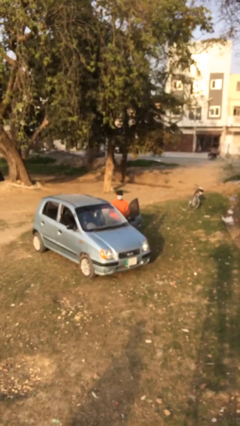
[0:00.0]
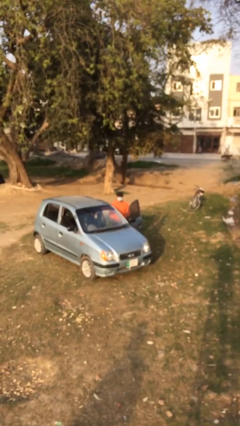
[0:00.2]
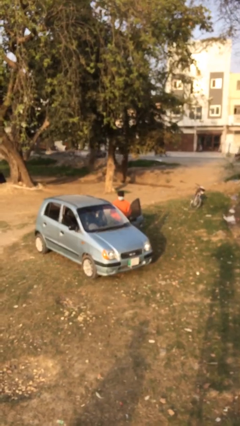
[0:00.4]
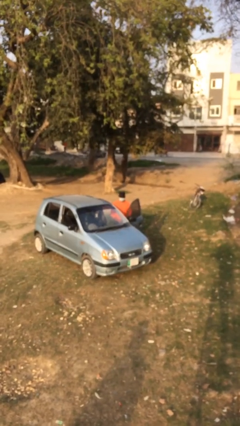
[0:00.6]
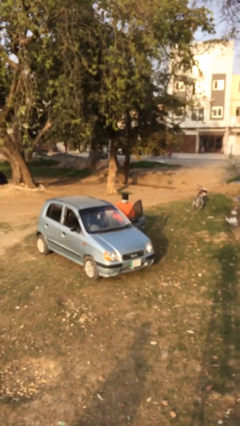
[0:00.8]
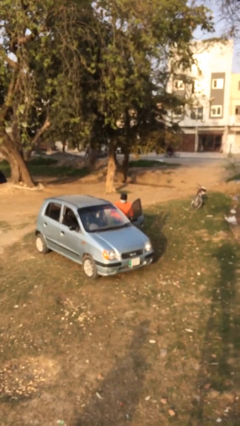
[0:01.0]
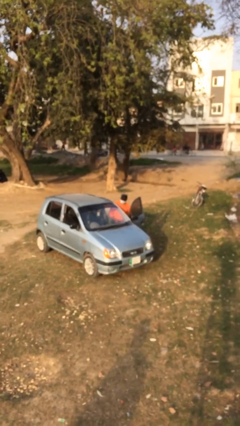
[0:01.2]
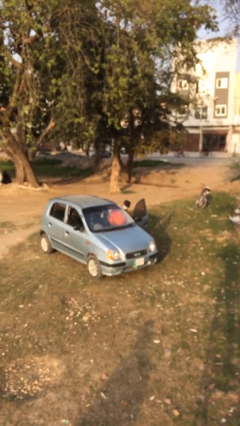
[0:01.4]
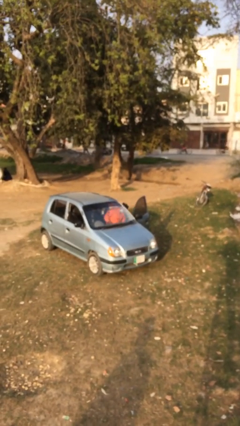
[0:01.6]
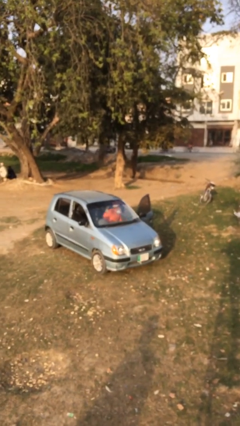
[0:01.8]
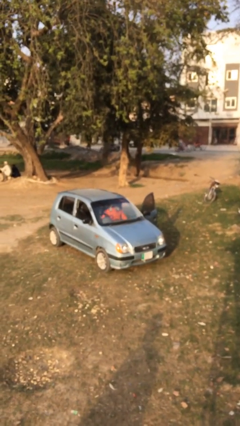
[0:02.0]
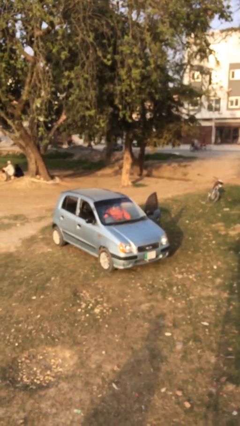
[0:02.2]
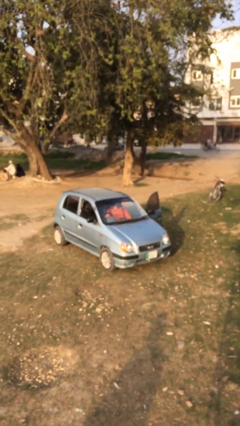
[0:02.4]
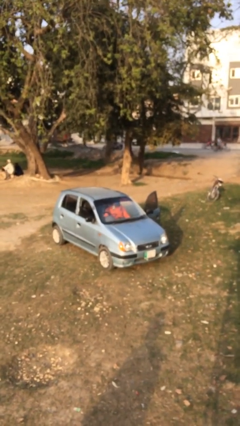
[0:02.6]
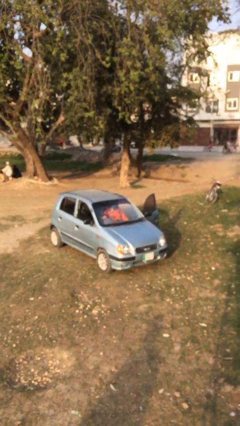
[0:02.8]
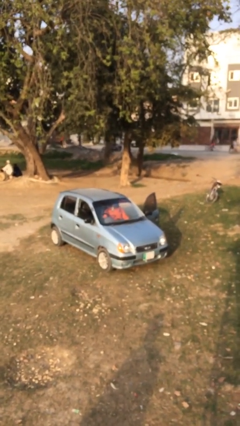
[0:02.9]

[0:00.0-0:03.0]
person enters car

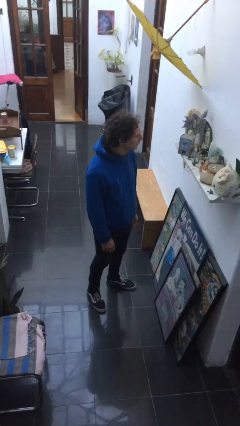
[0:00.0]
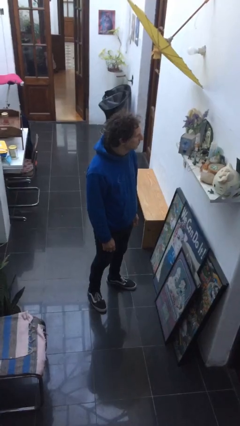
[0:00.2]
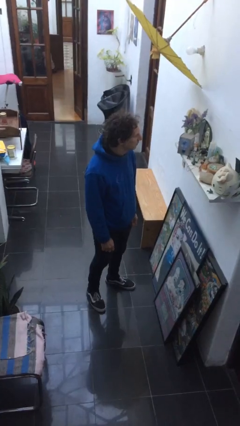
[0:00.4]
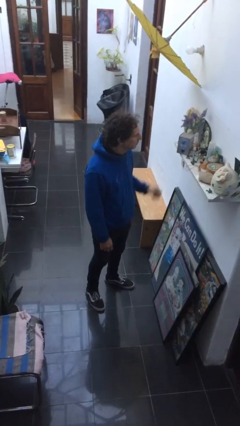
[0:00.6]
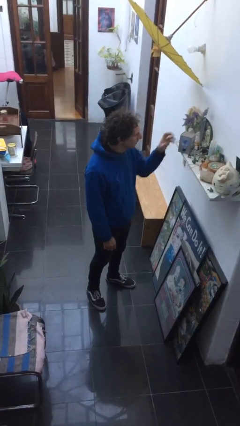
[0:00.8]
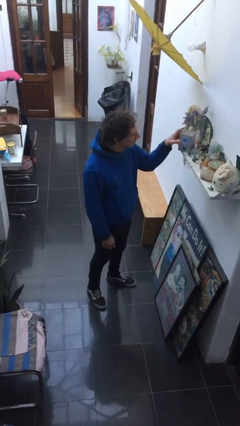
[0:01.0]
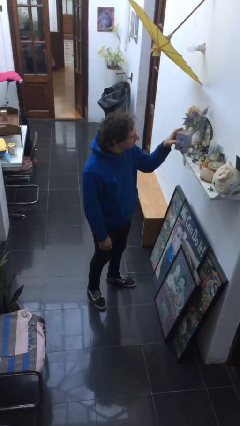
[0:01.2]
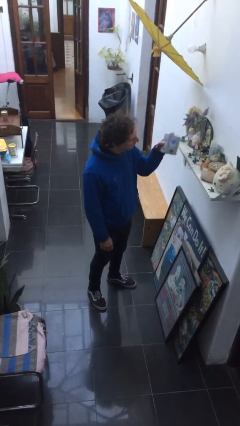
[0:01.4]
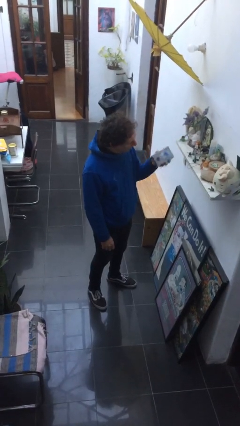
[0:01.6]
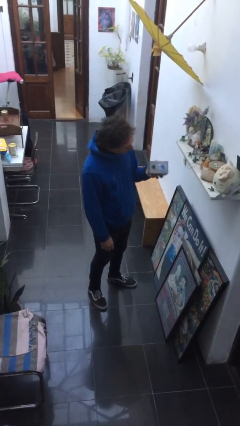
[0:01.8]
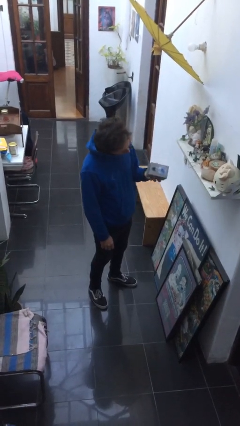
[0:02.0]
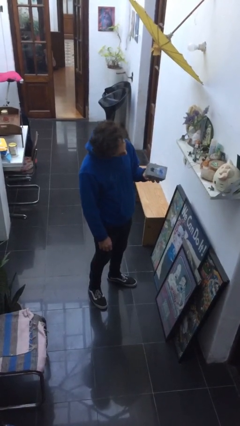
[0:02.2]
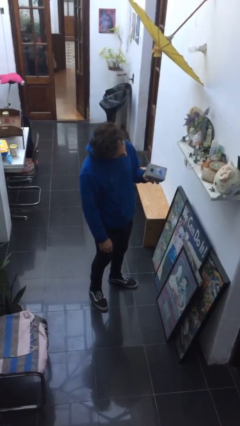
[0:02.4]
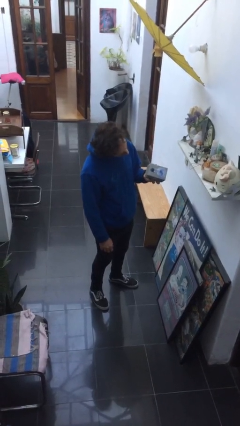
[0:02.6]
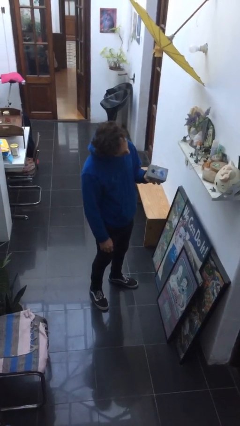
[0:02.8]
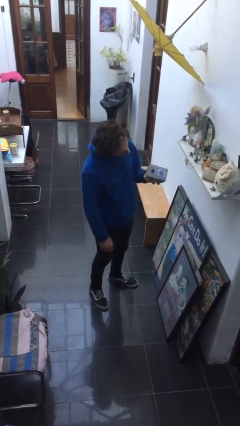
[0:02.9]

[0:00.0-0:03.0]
person picks up object from countertop

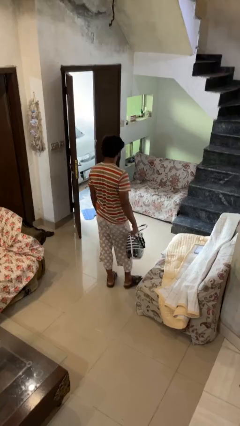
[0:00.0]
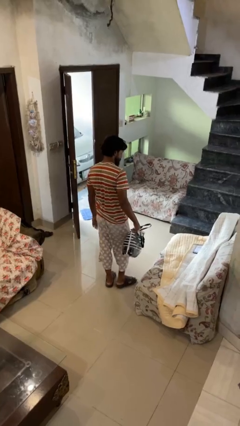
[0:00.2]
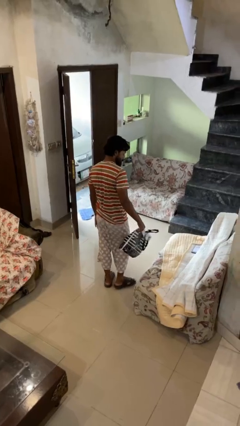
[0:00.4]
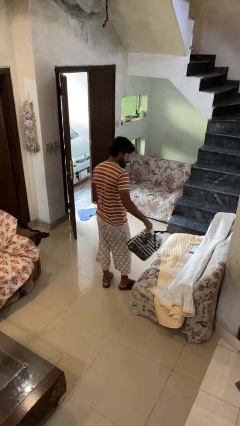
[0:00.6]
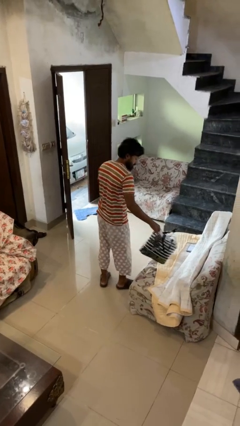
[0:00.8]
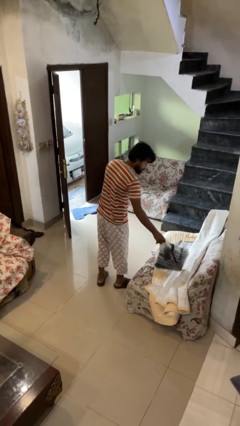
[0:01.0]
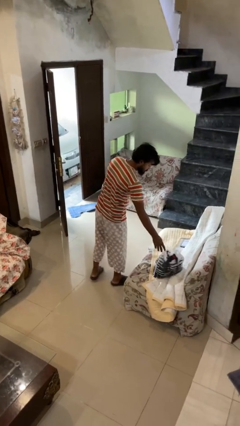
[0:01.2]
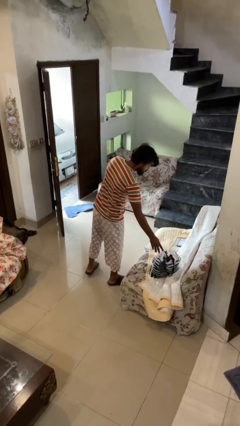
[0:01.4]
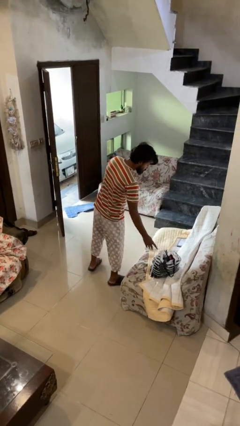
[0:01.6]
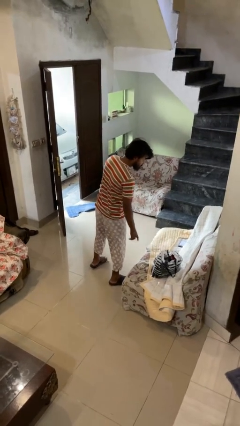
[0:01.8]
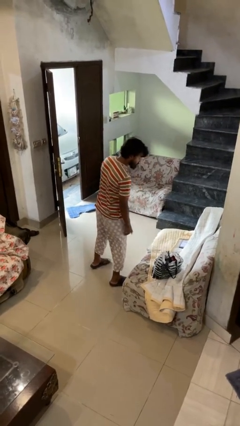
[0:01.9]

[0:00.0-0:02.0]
person puts down object on couch

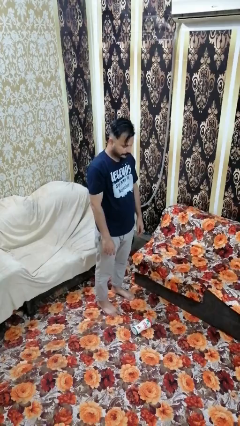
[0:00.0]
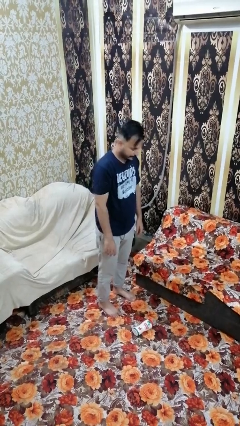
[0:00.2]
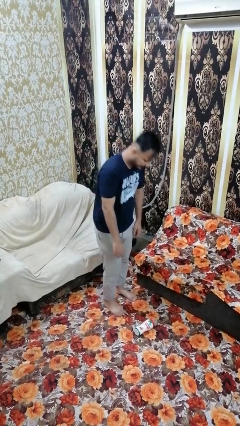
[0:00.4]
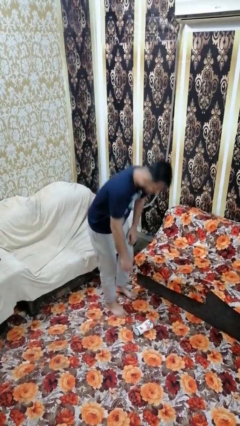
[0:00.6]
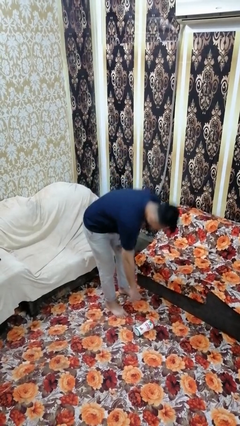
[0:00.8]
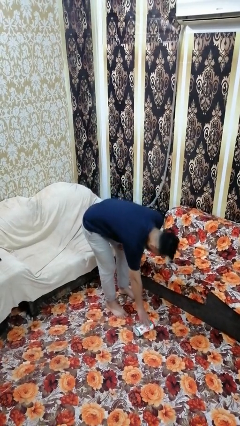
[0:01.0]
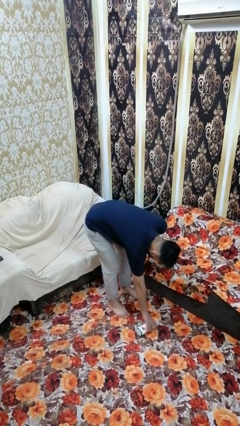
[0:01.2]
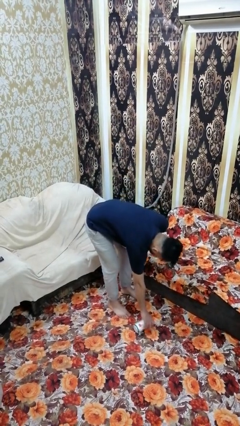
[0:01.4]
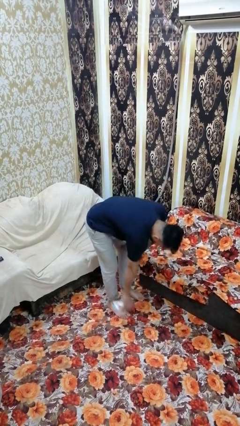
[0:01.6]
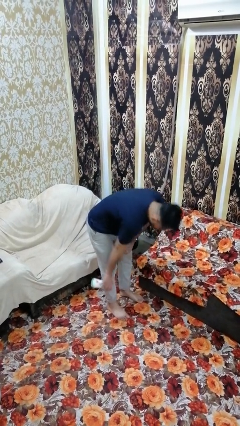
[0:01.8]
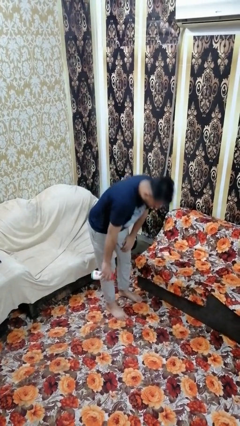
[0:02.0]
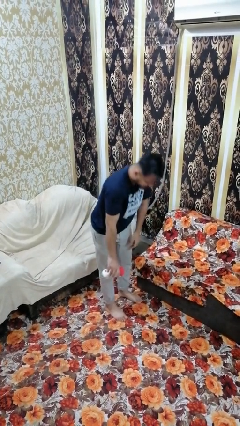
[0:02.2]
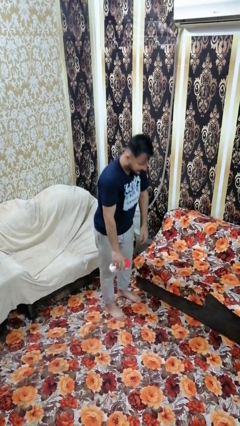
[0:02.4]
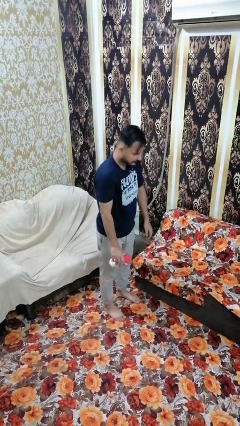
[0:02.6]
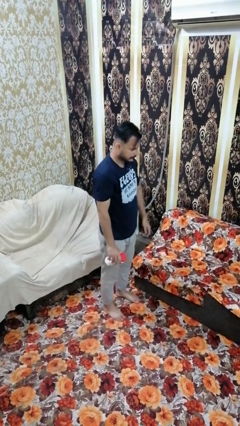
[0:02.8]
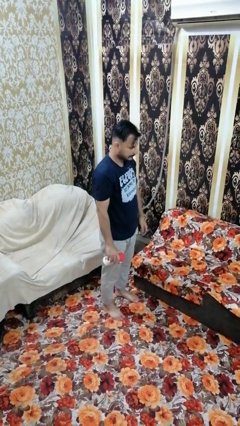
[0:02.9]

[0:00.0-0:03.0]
person picks up object from floor

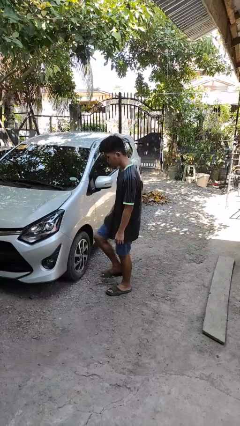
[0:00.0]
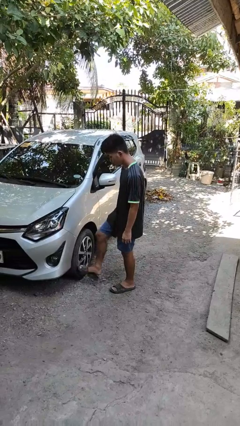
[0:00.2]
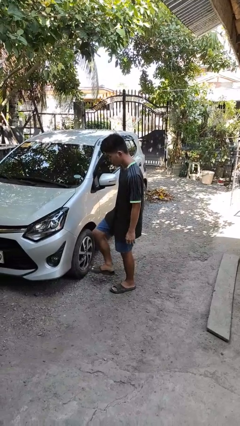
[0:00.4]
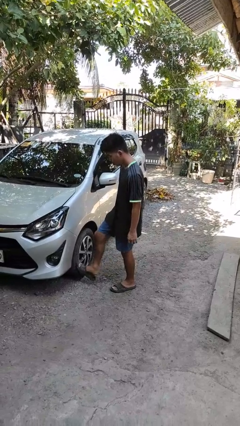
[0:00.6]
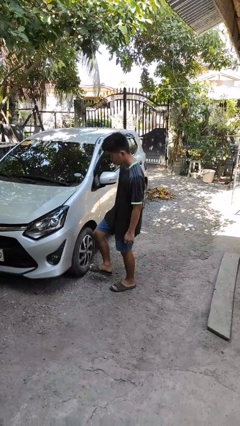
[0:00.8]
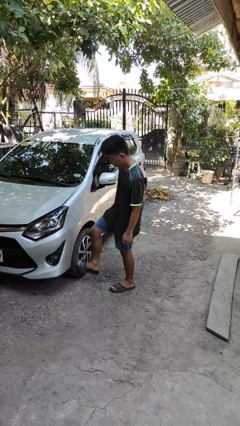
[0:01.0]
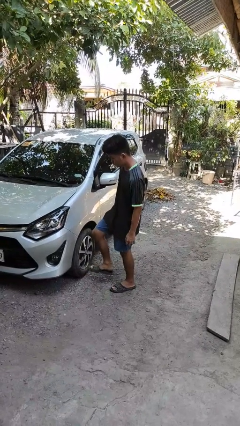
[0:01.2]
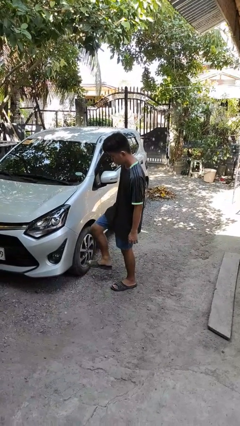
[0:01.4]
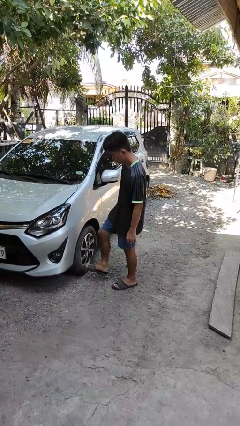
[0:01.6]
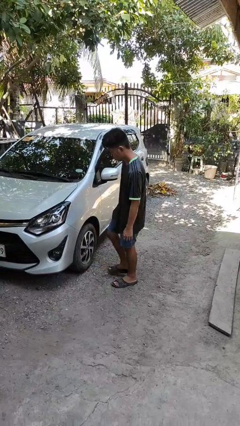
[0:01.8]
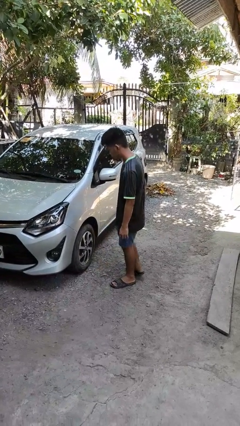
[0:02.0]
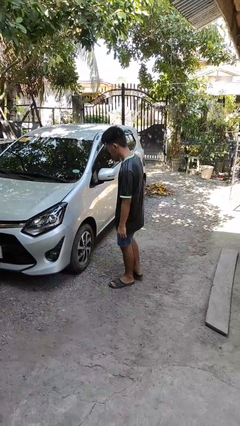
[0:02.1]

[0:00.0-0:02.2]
person kicks car tires

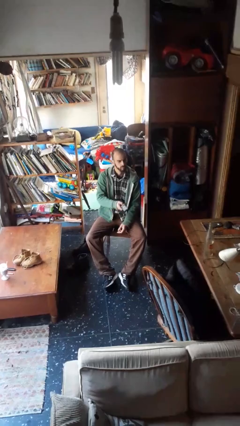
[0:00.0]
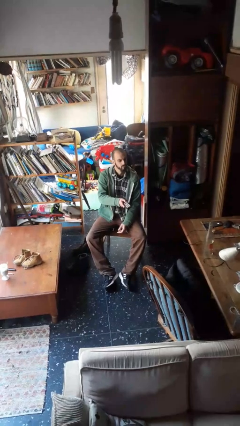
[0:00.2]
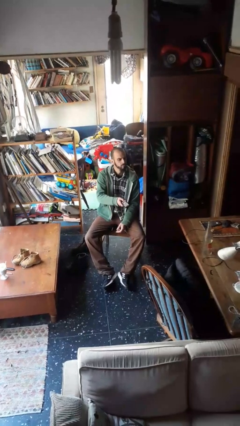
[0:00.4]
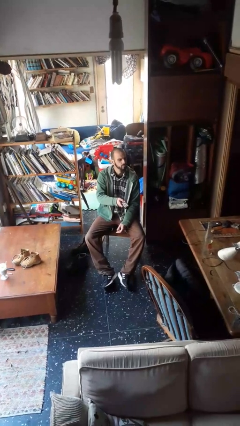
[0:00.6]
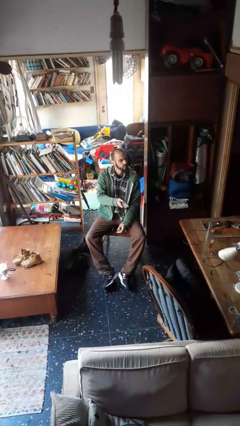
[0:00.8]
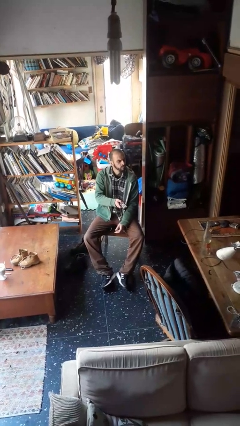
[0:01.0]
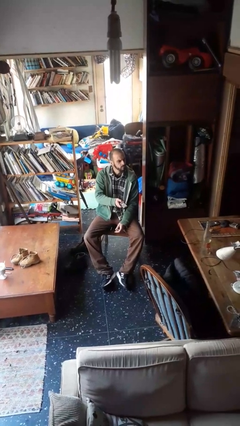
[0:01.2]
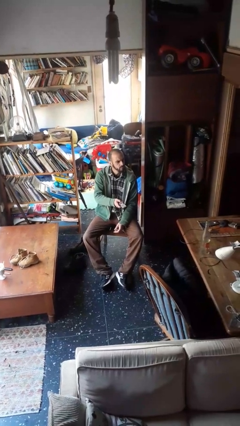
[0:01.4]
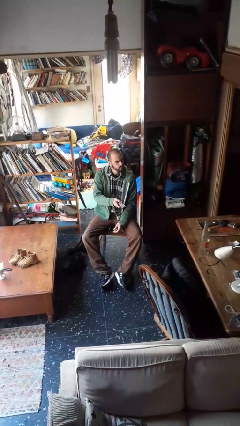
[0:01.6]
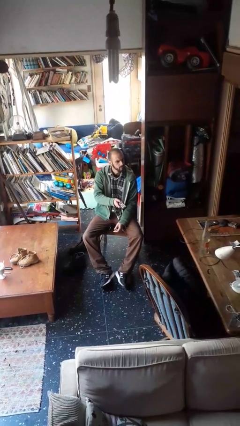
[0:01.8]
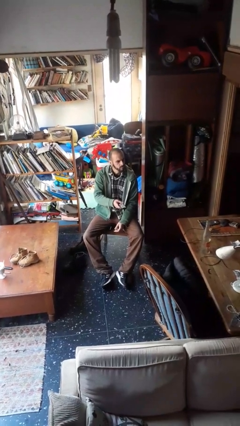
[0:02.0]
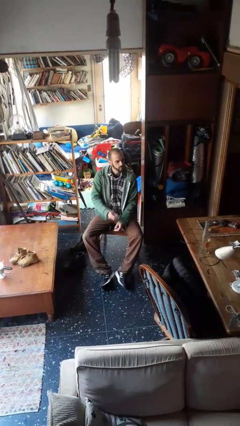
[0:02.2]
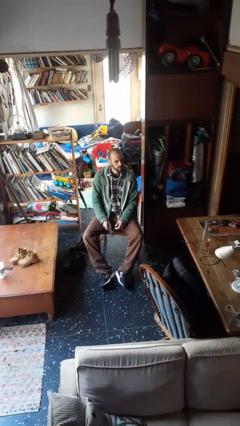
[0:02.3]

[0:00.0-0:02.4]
person uses television remote

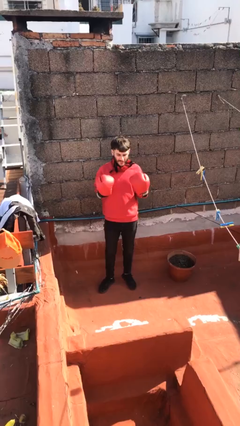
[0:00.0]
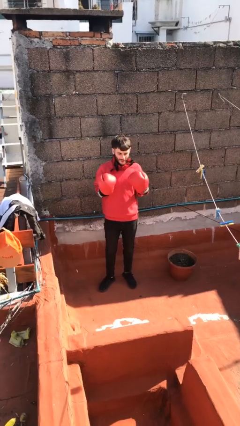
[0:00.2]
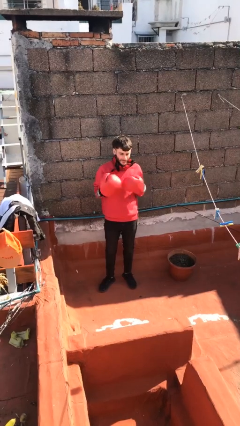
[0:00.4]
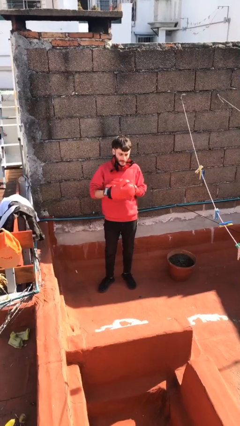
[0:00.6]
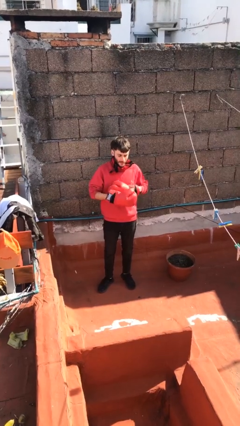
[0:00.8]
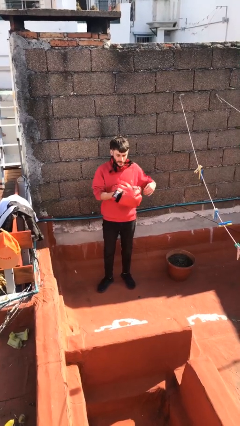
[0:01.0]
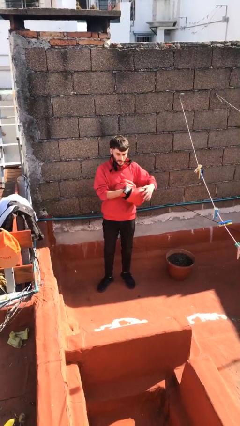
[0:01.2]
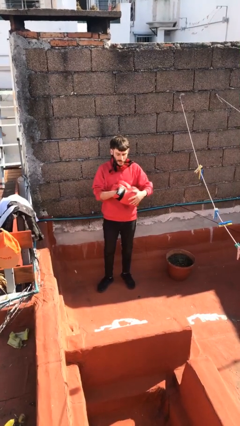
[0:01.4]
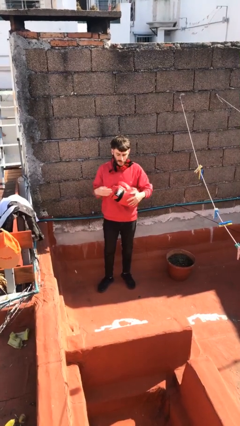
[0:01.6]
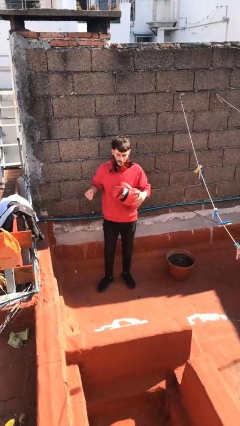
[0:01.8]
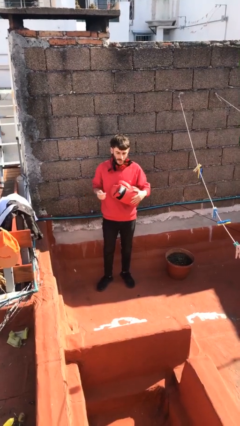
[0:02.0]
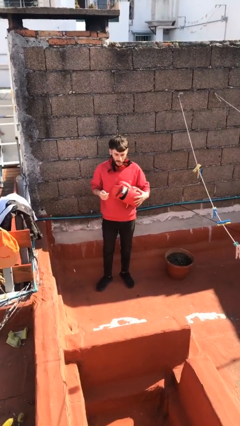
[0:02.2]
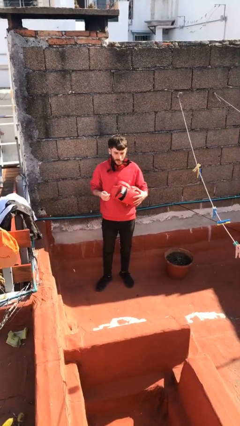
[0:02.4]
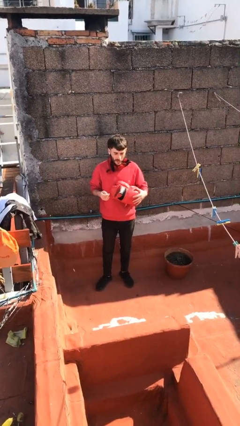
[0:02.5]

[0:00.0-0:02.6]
person takes off gloves
